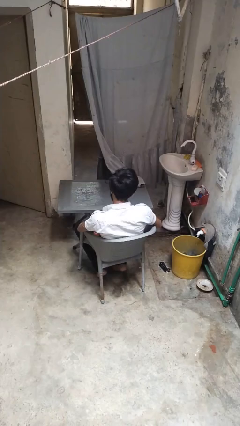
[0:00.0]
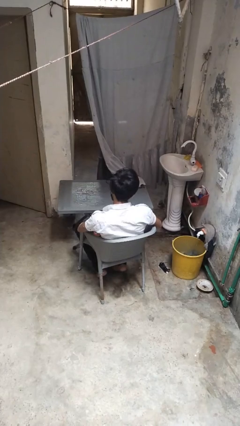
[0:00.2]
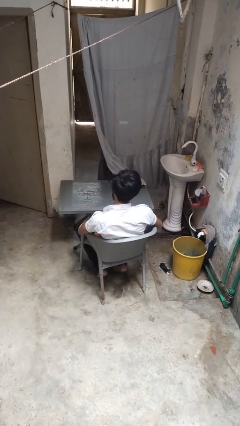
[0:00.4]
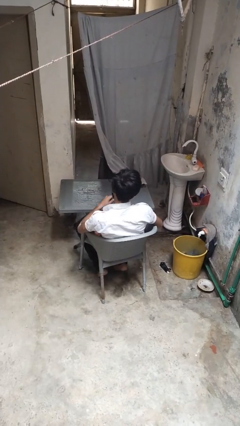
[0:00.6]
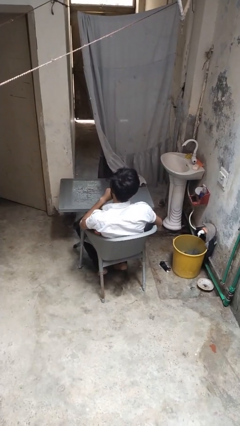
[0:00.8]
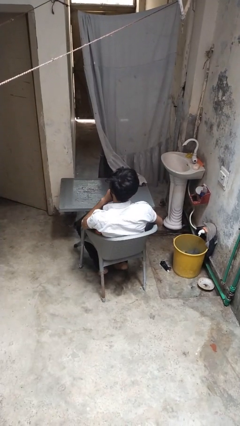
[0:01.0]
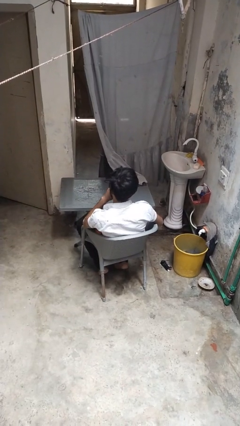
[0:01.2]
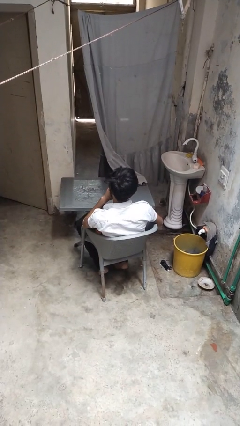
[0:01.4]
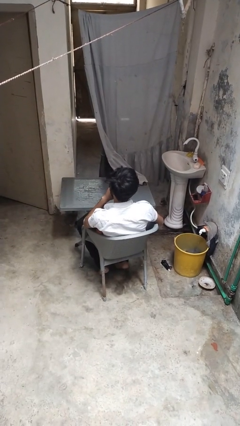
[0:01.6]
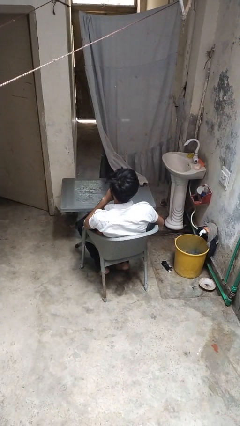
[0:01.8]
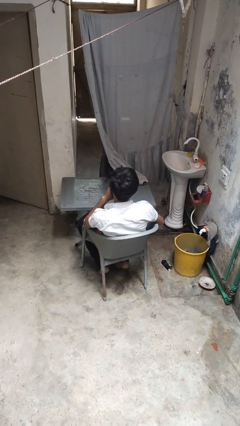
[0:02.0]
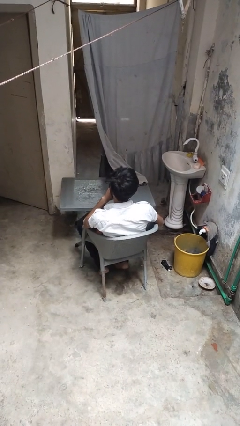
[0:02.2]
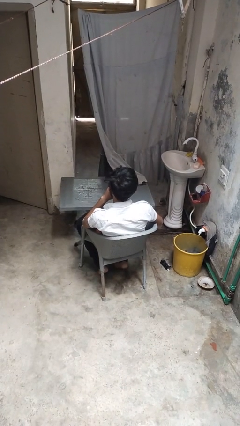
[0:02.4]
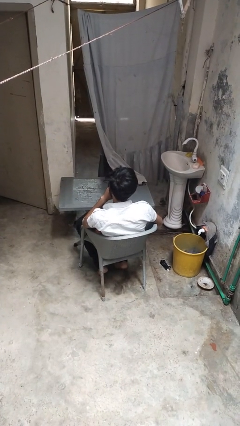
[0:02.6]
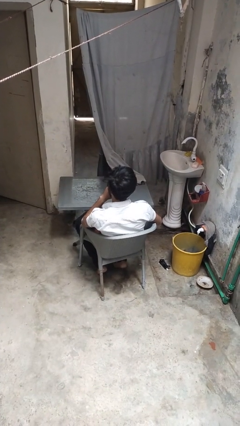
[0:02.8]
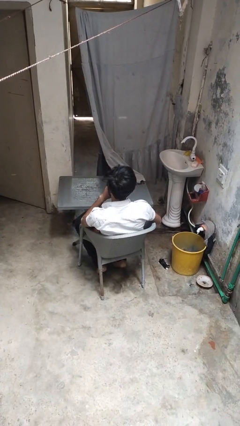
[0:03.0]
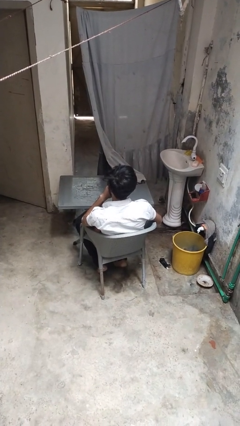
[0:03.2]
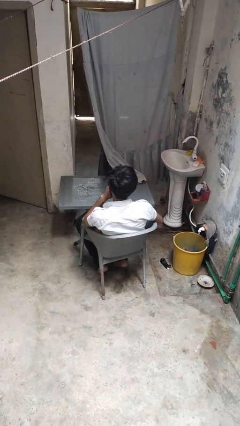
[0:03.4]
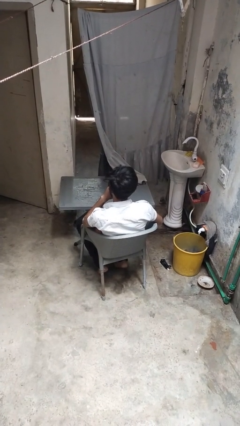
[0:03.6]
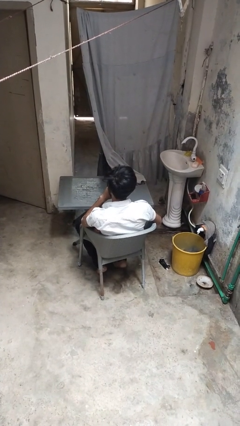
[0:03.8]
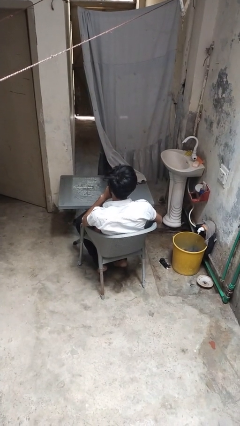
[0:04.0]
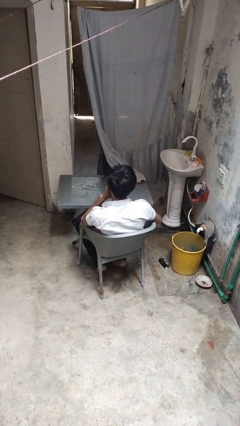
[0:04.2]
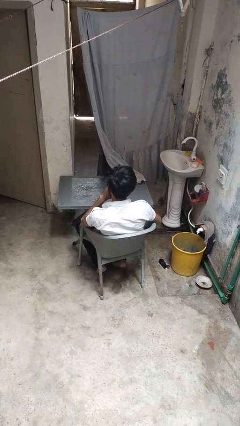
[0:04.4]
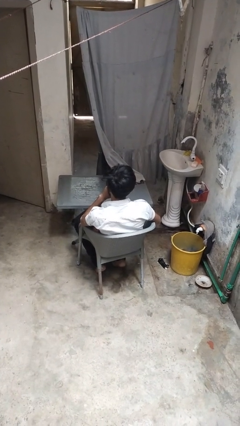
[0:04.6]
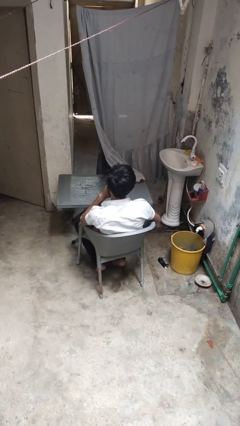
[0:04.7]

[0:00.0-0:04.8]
person licks fingers

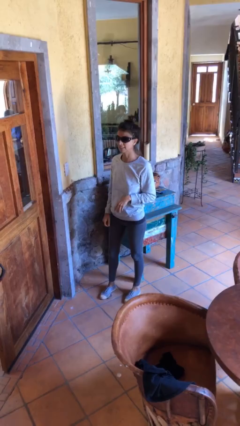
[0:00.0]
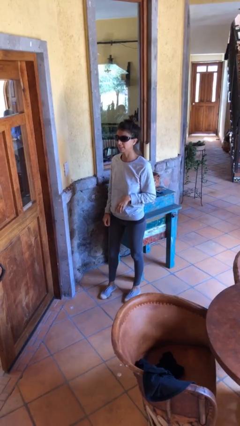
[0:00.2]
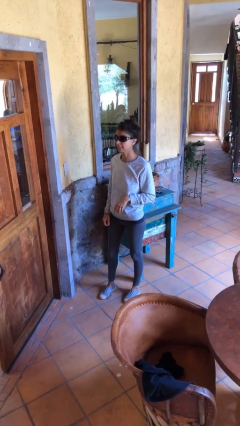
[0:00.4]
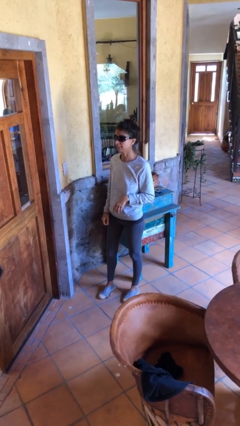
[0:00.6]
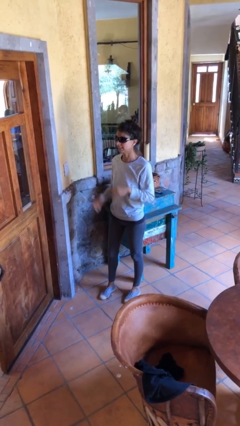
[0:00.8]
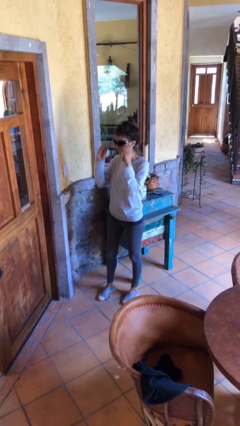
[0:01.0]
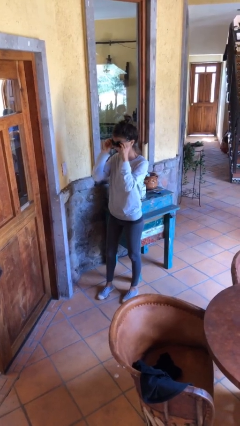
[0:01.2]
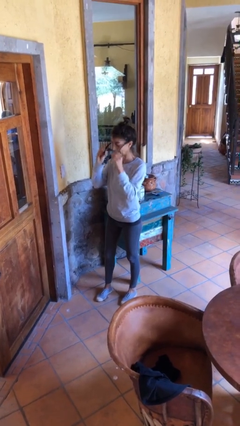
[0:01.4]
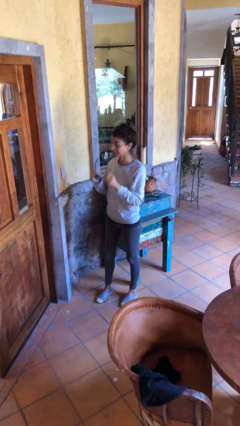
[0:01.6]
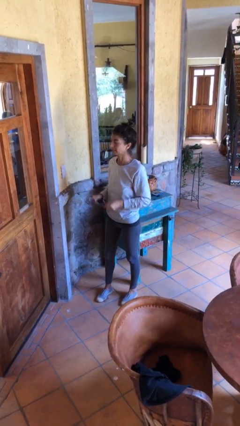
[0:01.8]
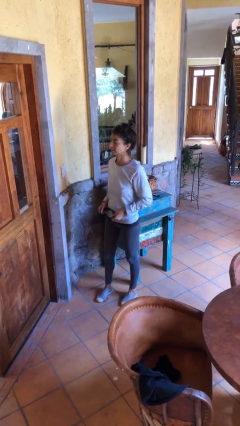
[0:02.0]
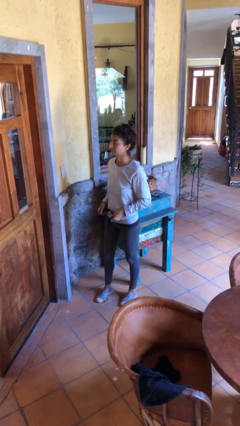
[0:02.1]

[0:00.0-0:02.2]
person takes off sunglasses

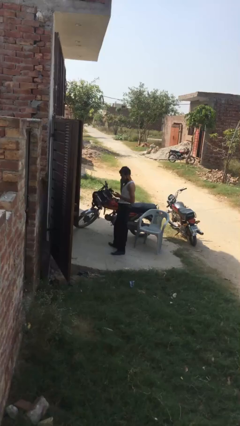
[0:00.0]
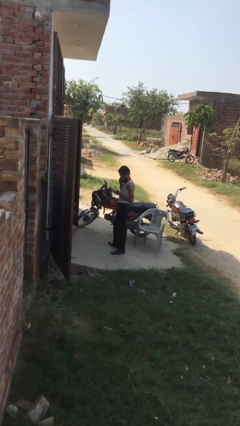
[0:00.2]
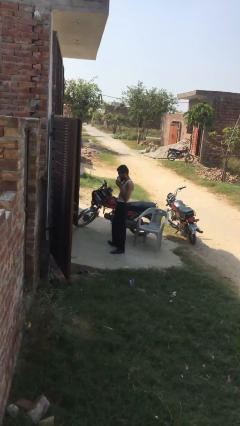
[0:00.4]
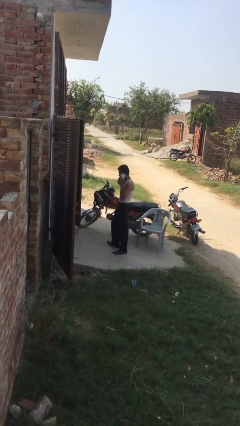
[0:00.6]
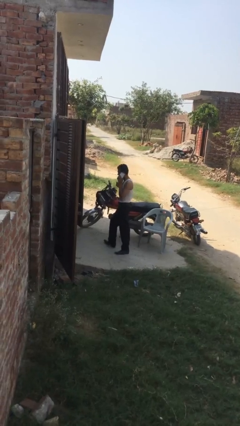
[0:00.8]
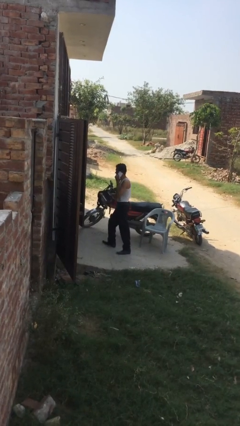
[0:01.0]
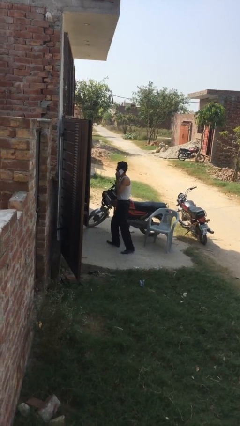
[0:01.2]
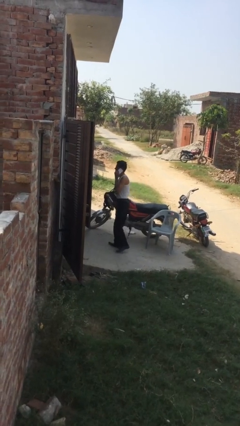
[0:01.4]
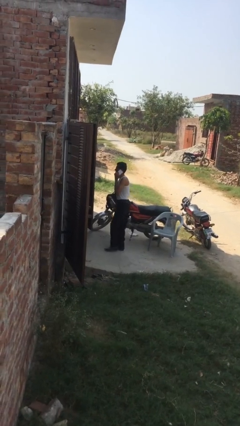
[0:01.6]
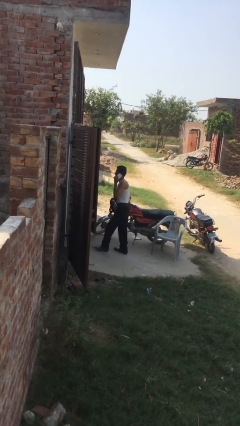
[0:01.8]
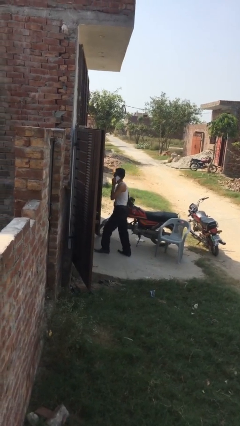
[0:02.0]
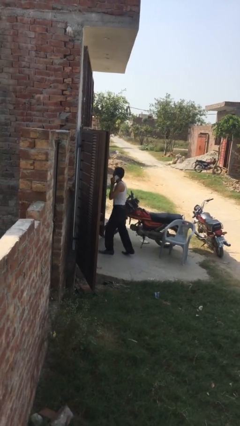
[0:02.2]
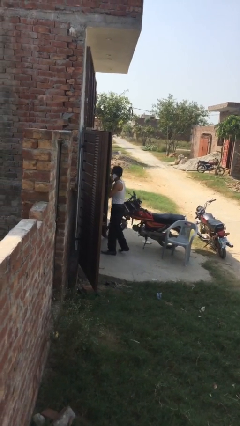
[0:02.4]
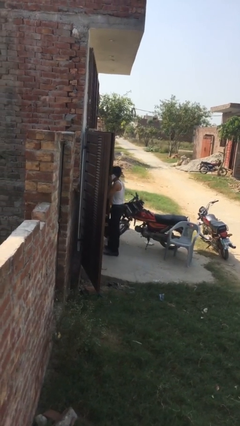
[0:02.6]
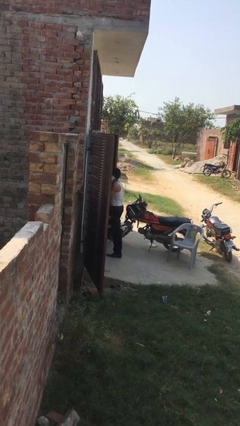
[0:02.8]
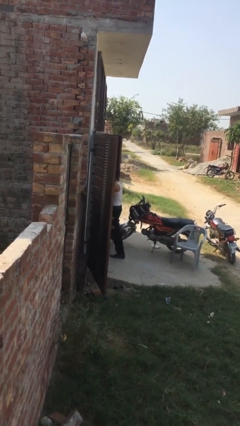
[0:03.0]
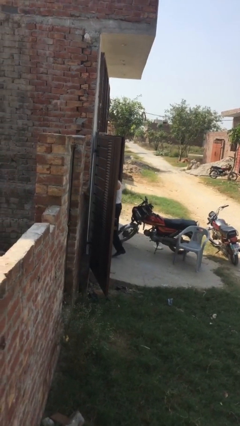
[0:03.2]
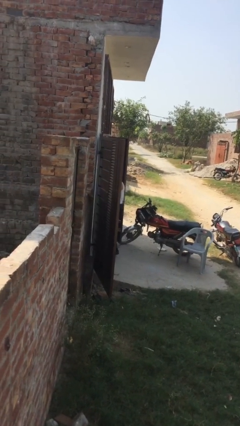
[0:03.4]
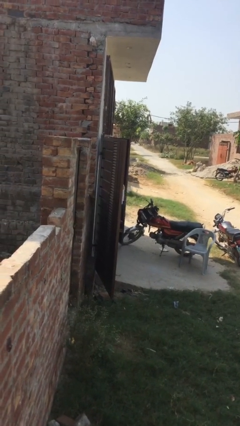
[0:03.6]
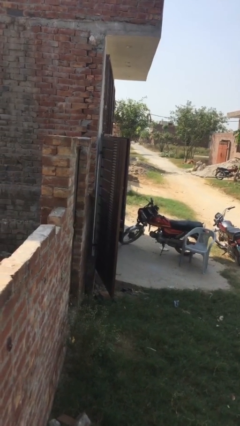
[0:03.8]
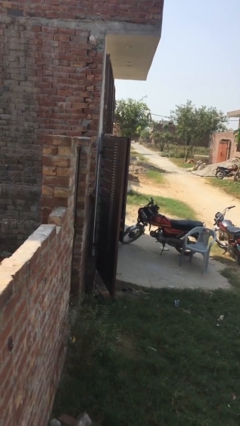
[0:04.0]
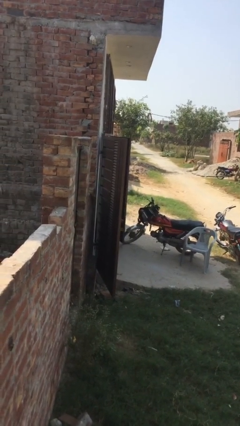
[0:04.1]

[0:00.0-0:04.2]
person exits scene through structure

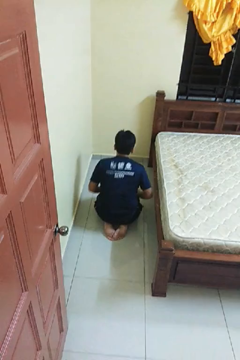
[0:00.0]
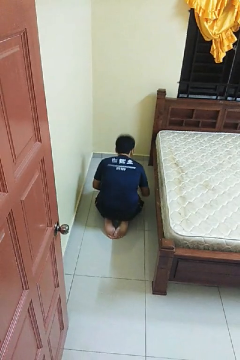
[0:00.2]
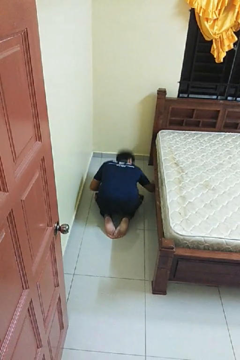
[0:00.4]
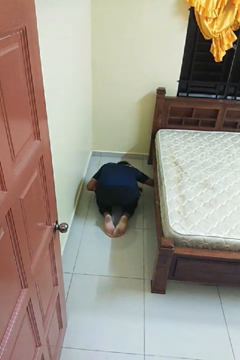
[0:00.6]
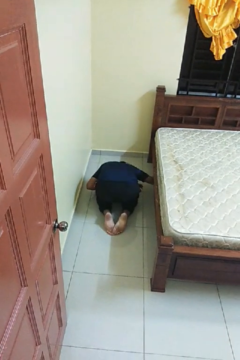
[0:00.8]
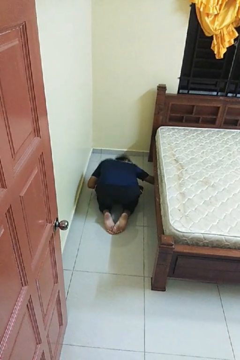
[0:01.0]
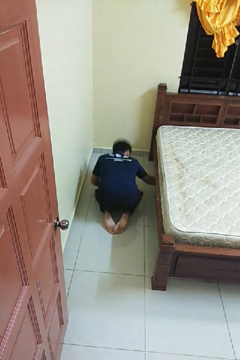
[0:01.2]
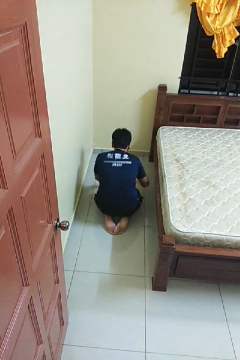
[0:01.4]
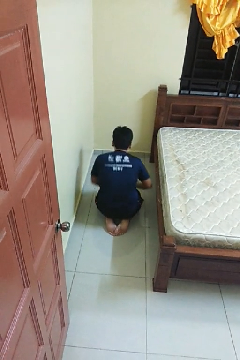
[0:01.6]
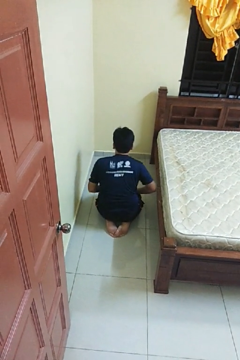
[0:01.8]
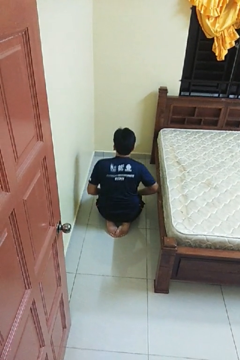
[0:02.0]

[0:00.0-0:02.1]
person searches under bed

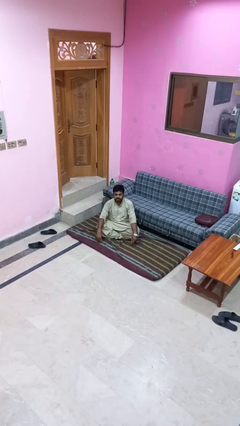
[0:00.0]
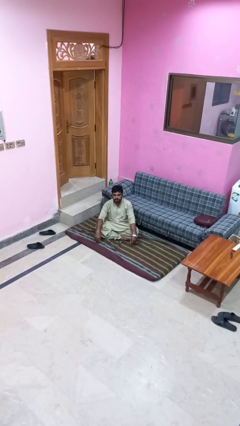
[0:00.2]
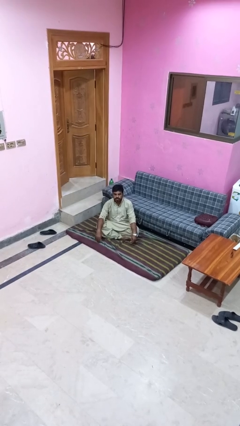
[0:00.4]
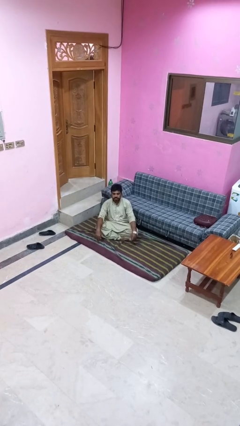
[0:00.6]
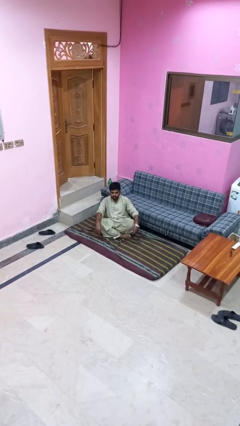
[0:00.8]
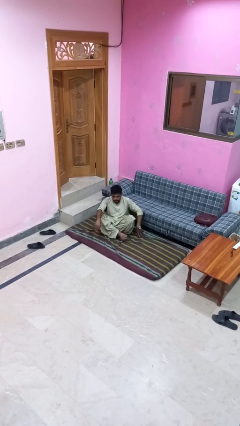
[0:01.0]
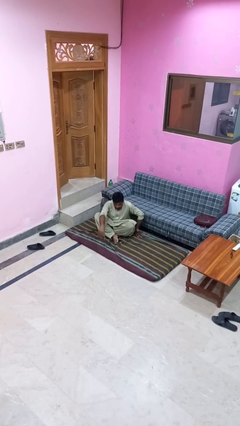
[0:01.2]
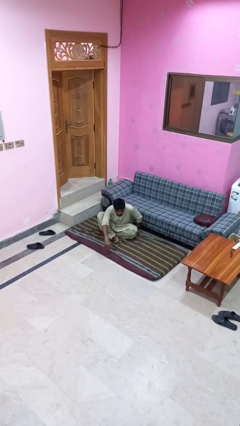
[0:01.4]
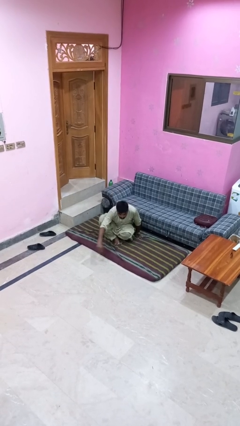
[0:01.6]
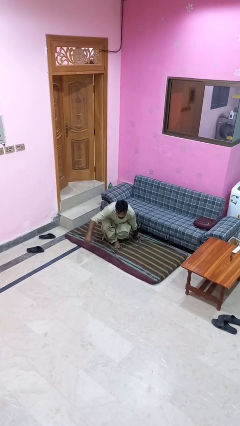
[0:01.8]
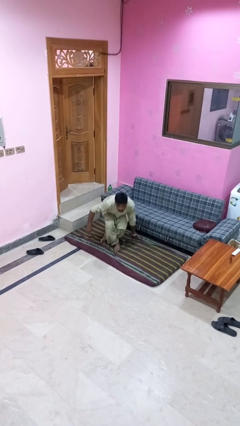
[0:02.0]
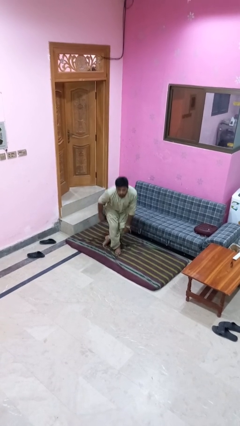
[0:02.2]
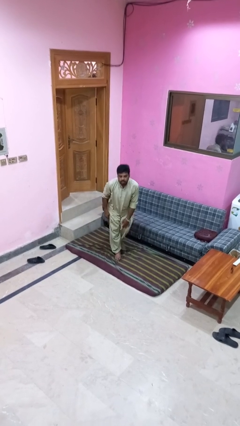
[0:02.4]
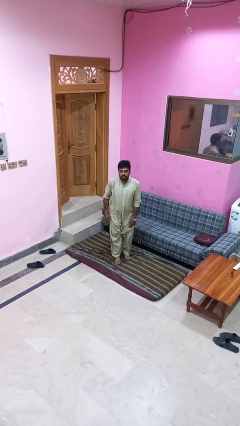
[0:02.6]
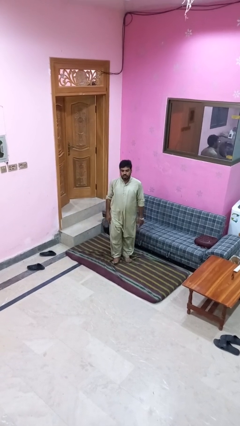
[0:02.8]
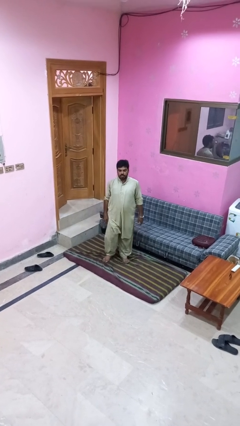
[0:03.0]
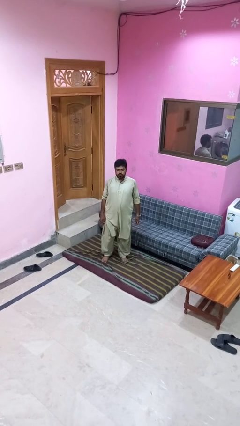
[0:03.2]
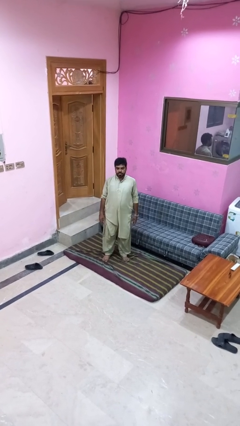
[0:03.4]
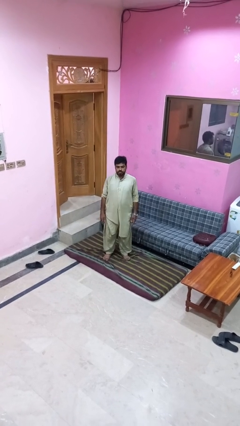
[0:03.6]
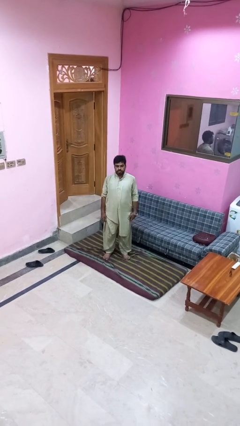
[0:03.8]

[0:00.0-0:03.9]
person stands up from floor
